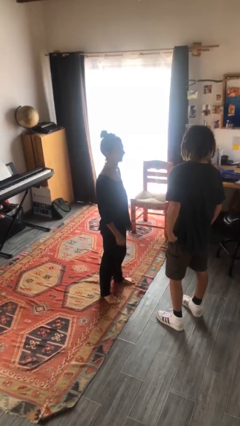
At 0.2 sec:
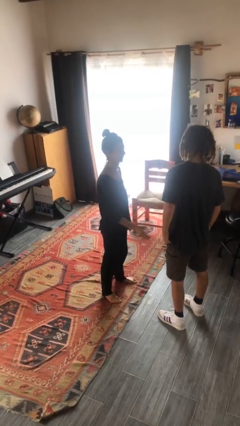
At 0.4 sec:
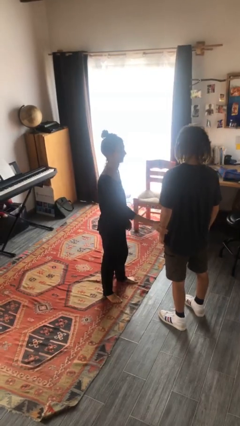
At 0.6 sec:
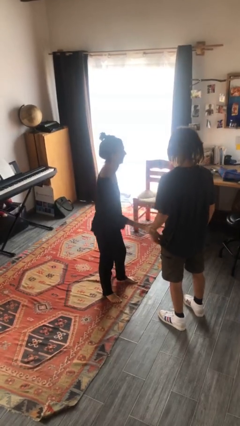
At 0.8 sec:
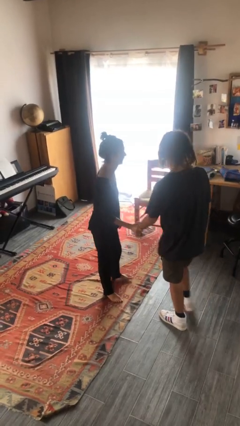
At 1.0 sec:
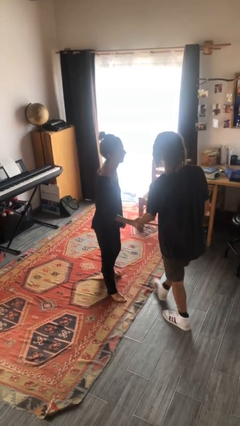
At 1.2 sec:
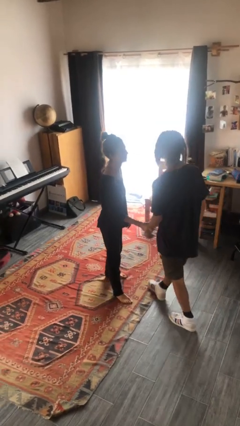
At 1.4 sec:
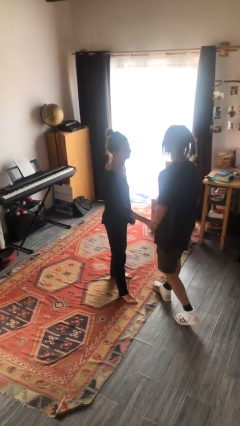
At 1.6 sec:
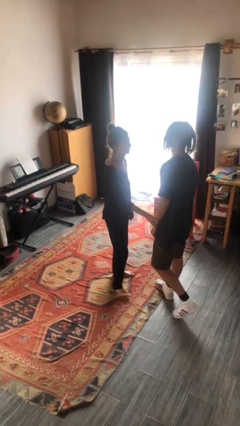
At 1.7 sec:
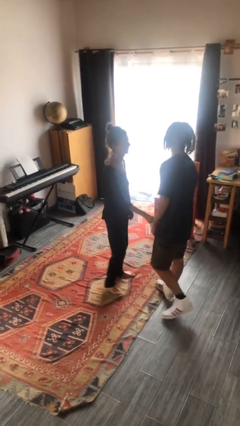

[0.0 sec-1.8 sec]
person grabs person by forearm

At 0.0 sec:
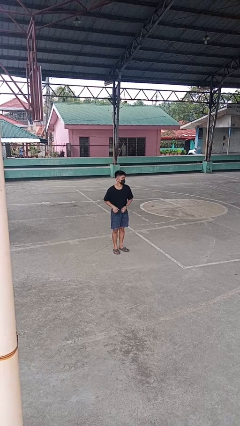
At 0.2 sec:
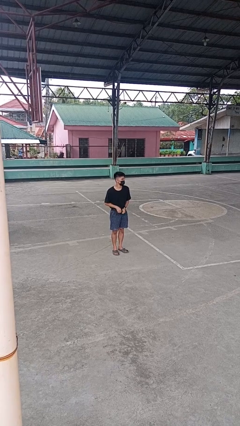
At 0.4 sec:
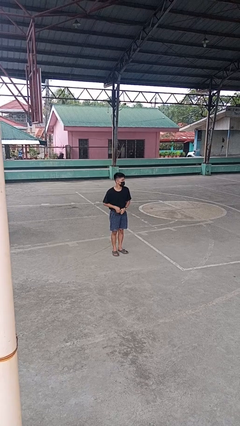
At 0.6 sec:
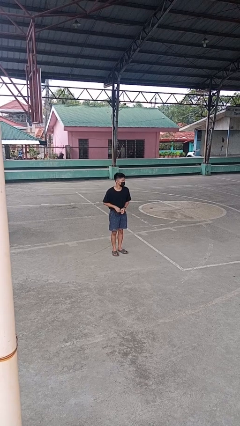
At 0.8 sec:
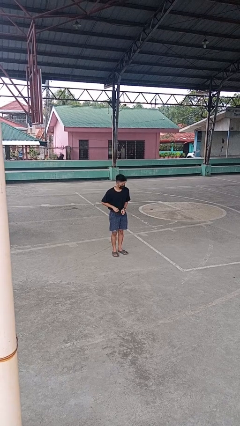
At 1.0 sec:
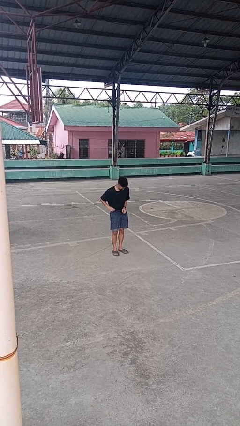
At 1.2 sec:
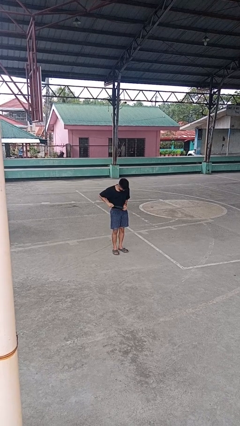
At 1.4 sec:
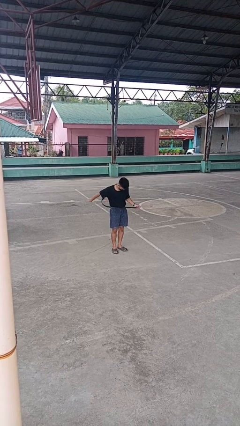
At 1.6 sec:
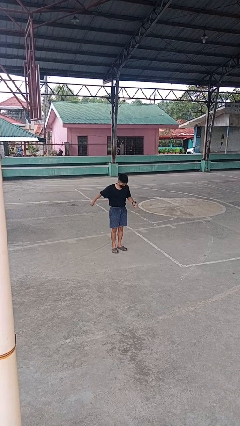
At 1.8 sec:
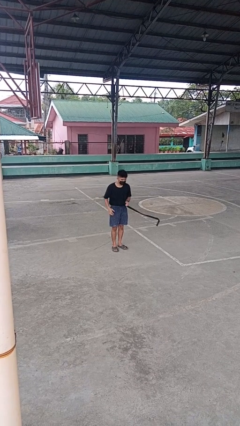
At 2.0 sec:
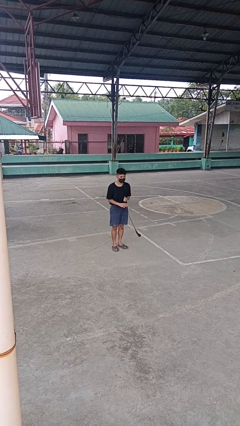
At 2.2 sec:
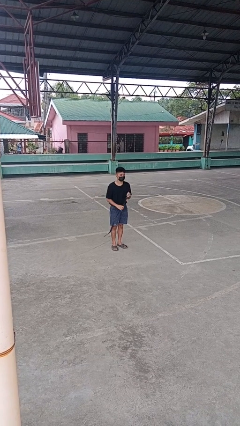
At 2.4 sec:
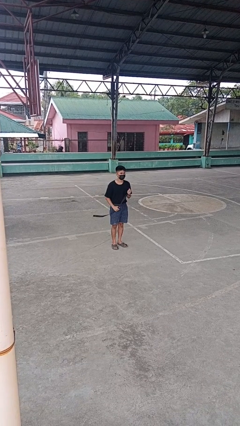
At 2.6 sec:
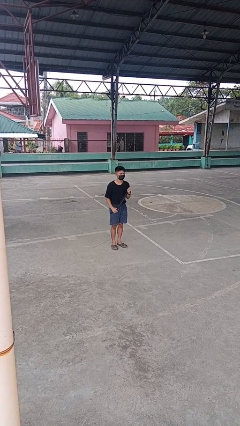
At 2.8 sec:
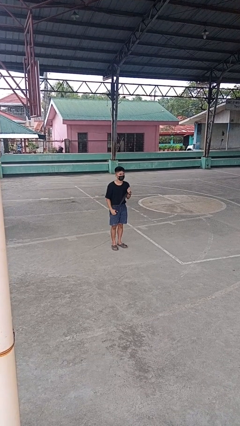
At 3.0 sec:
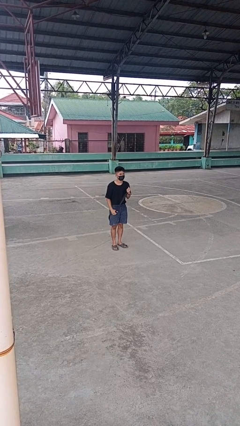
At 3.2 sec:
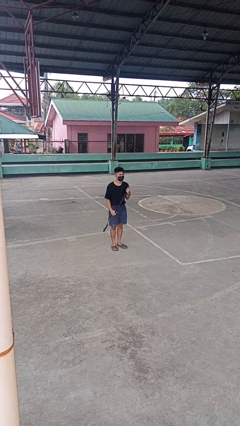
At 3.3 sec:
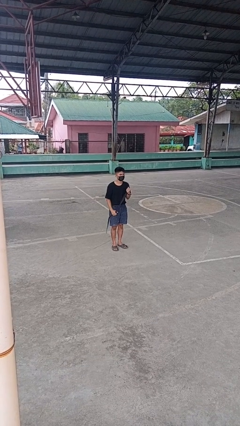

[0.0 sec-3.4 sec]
person takes off belt

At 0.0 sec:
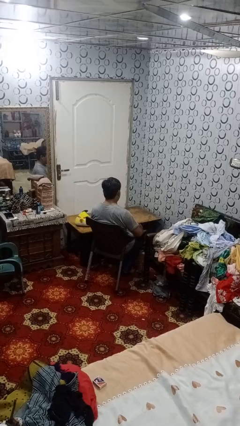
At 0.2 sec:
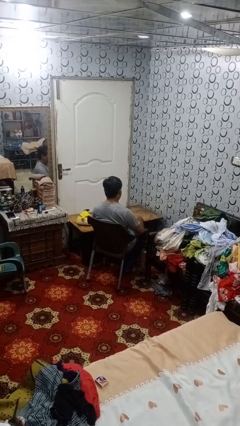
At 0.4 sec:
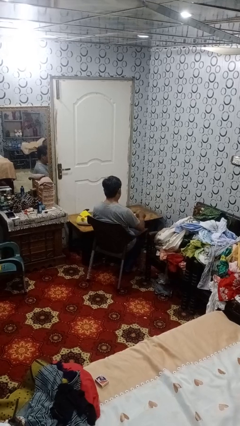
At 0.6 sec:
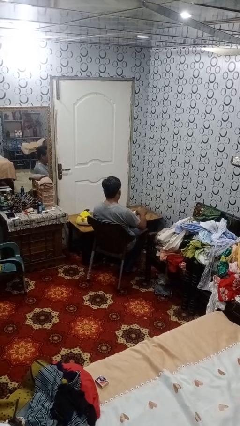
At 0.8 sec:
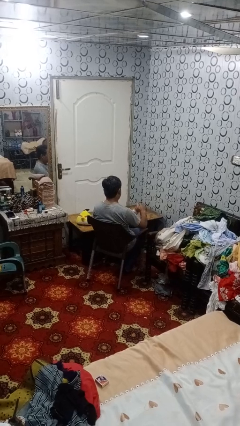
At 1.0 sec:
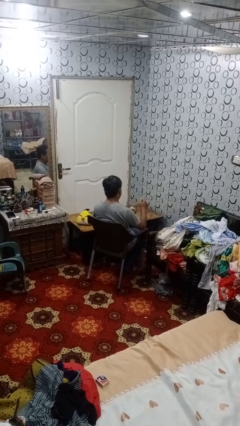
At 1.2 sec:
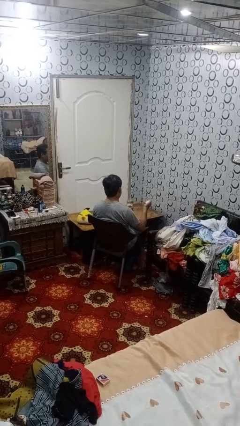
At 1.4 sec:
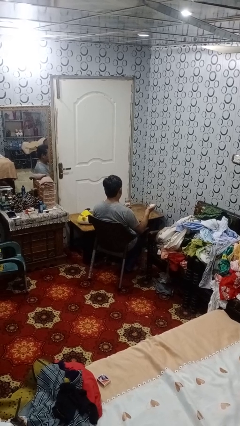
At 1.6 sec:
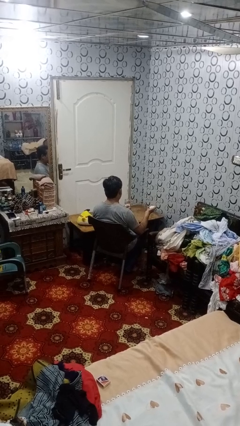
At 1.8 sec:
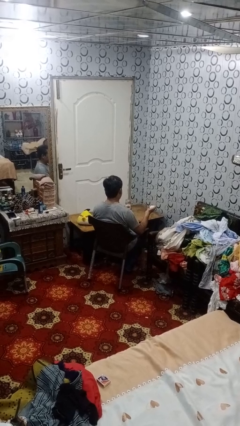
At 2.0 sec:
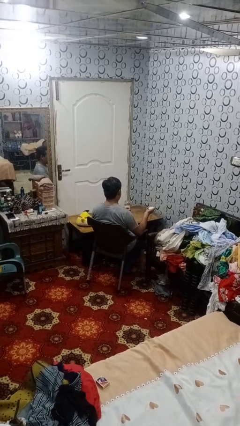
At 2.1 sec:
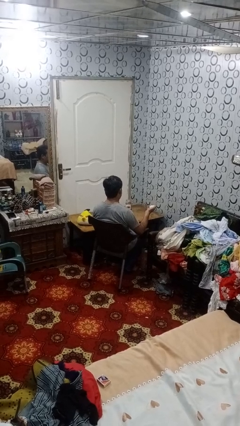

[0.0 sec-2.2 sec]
person opens jar

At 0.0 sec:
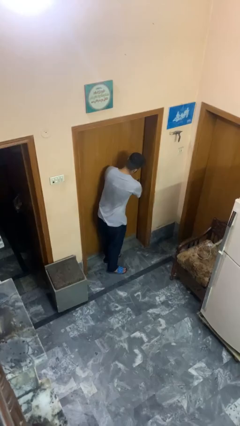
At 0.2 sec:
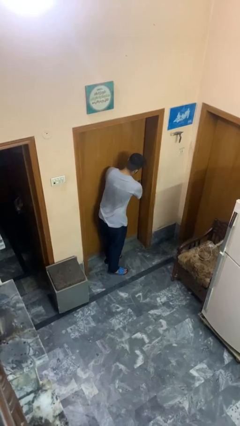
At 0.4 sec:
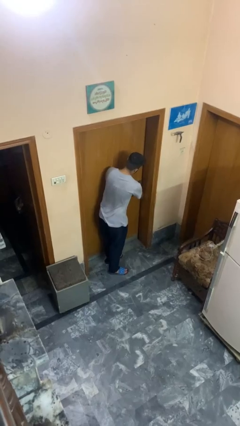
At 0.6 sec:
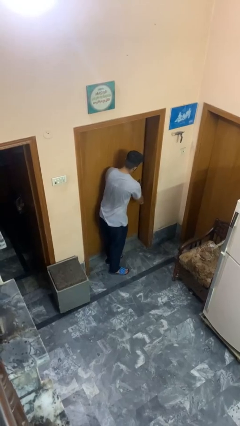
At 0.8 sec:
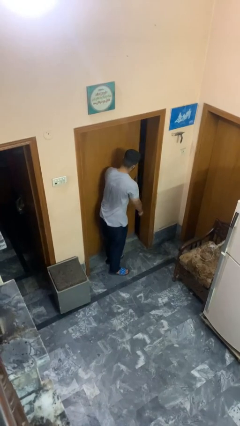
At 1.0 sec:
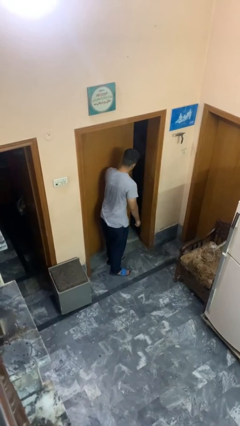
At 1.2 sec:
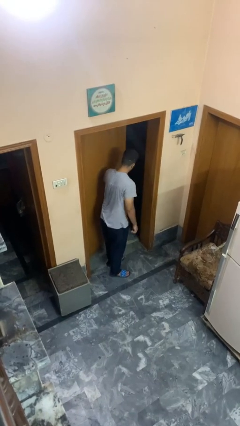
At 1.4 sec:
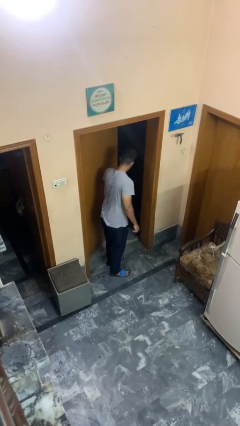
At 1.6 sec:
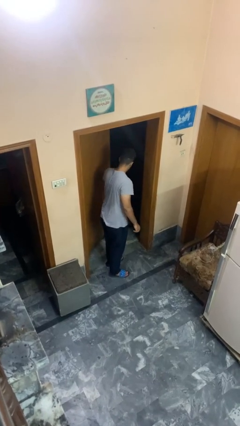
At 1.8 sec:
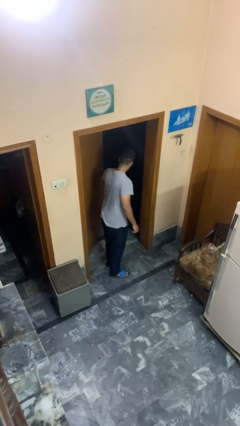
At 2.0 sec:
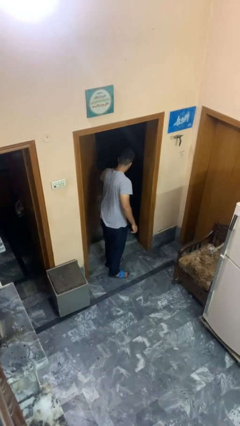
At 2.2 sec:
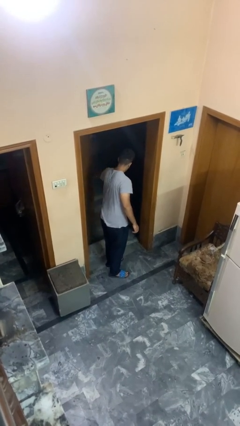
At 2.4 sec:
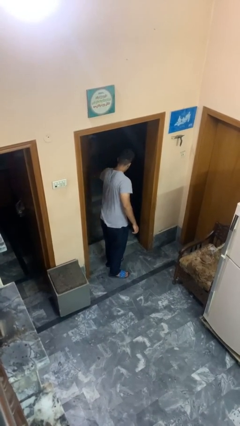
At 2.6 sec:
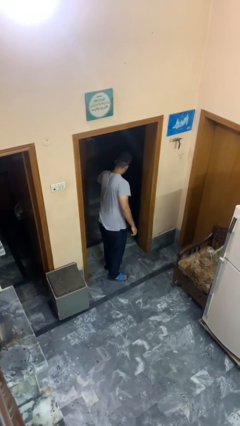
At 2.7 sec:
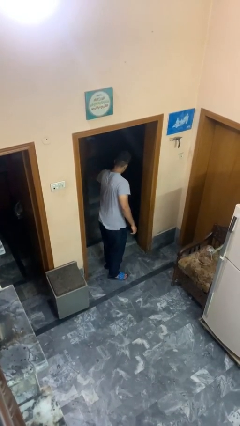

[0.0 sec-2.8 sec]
person opens facility door

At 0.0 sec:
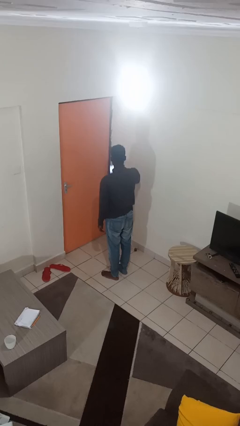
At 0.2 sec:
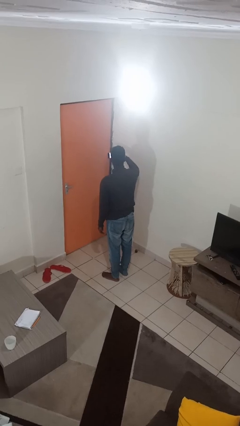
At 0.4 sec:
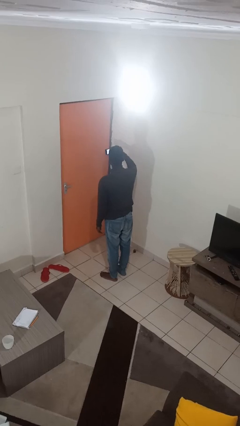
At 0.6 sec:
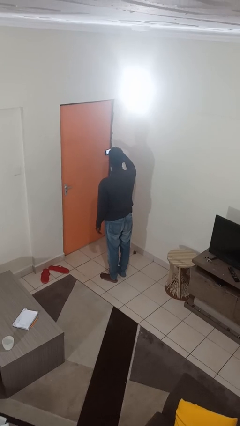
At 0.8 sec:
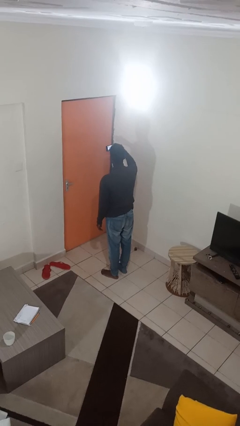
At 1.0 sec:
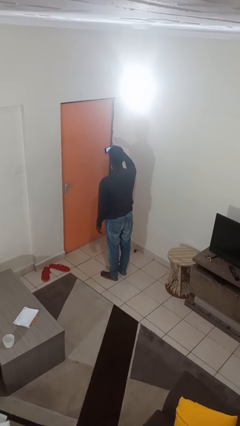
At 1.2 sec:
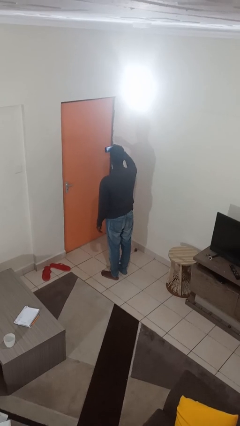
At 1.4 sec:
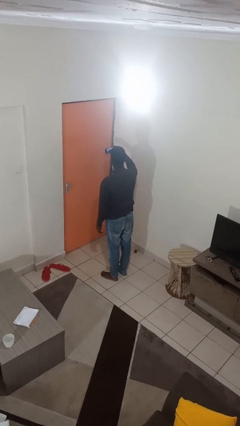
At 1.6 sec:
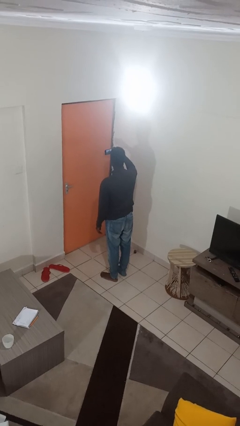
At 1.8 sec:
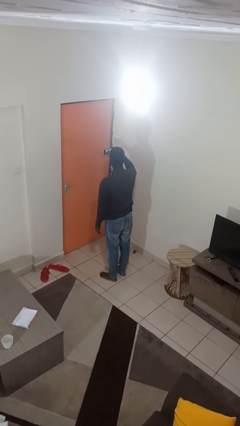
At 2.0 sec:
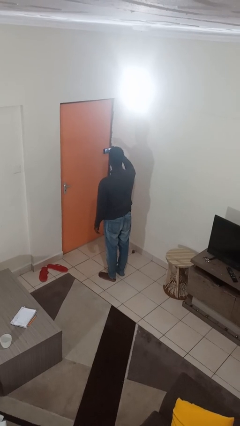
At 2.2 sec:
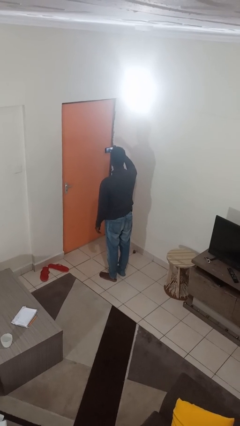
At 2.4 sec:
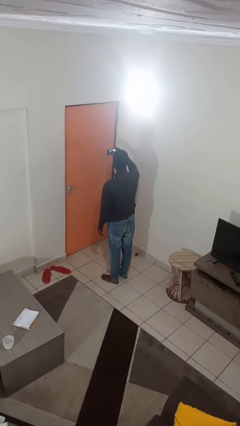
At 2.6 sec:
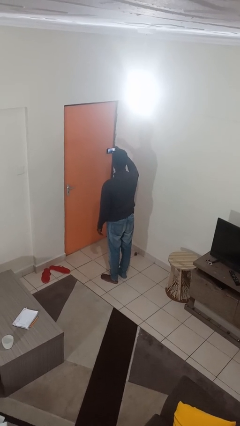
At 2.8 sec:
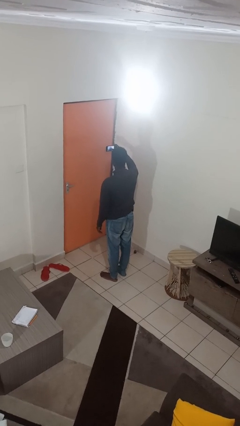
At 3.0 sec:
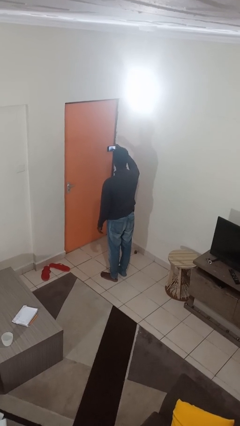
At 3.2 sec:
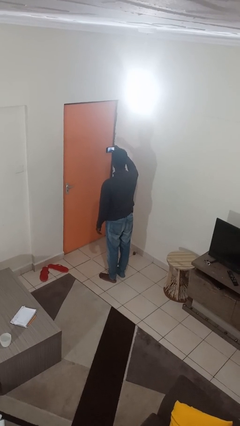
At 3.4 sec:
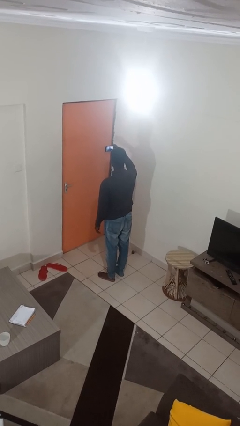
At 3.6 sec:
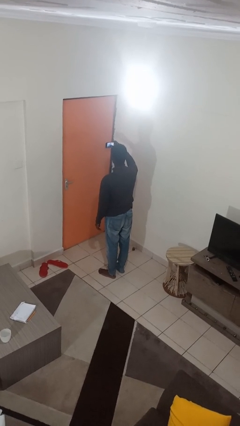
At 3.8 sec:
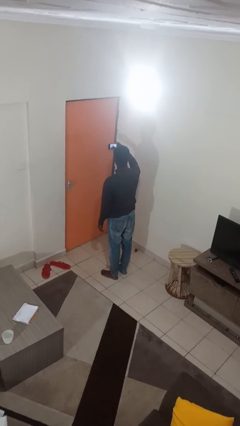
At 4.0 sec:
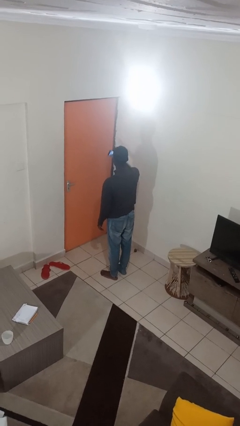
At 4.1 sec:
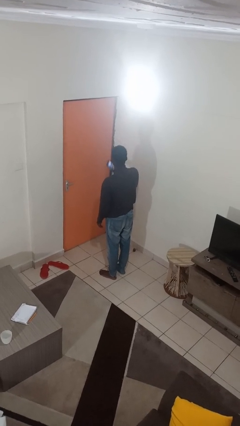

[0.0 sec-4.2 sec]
person takes selfie

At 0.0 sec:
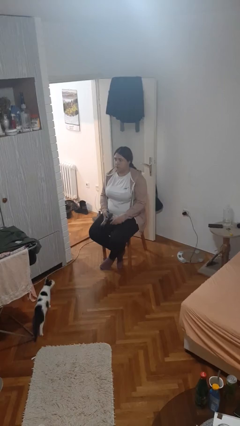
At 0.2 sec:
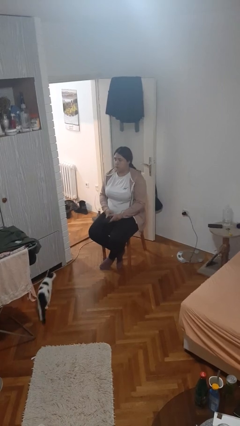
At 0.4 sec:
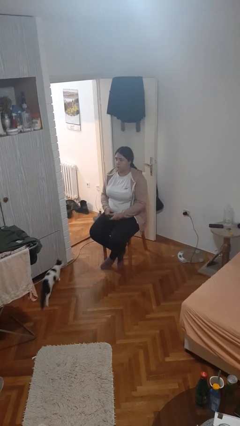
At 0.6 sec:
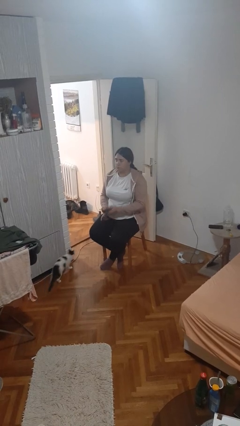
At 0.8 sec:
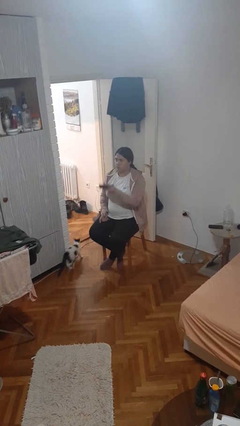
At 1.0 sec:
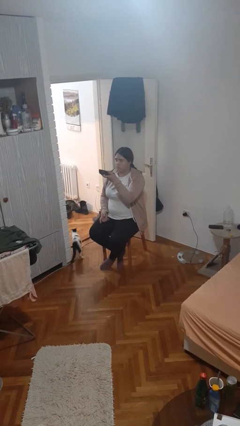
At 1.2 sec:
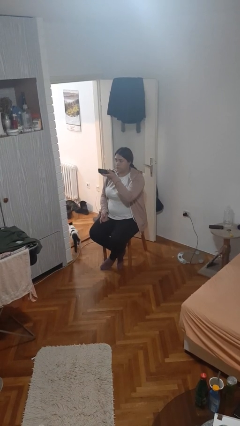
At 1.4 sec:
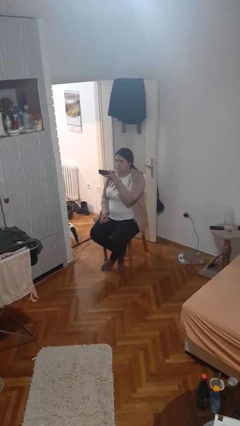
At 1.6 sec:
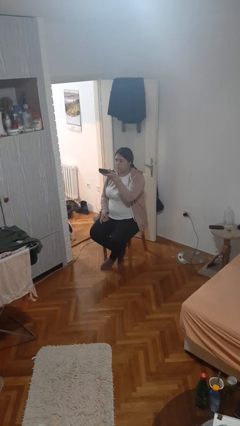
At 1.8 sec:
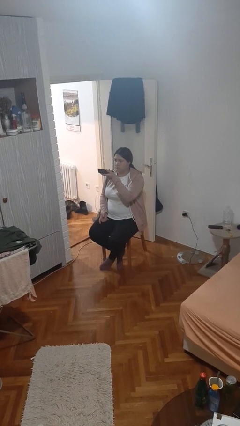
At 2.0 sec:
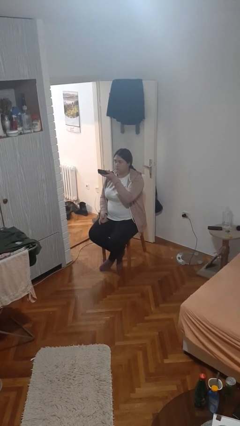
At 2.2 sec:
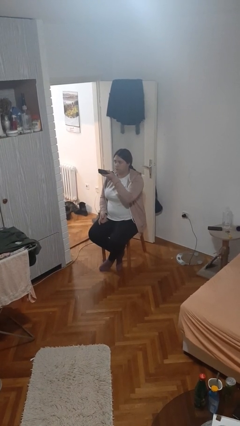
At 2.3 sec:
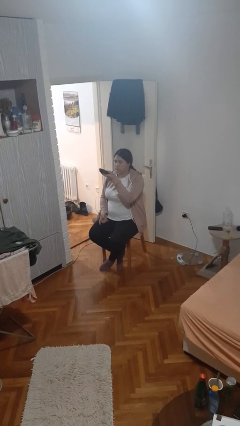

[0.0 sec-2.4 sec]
person uses television remote

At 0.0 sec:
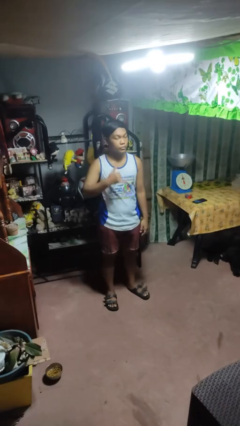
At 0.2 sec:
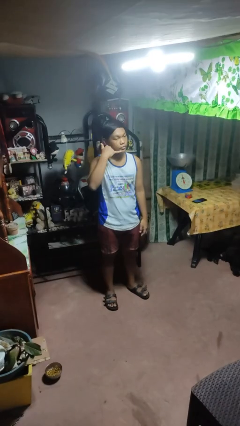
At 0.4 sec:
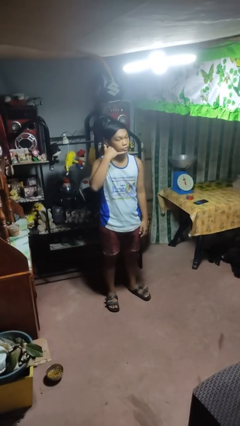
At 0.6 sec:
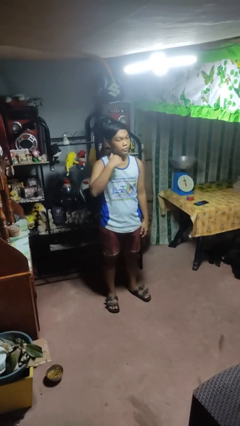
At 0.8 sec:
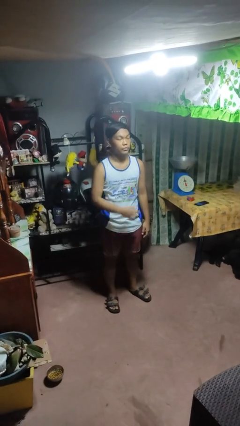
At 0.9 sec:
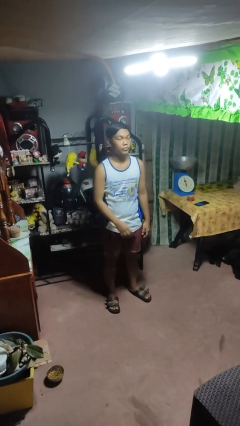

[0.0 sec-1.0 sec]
person gestures call me
